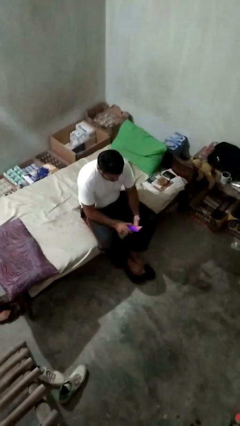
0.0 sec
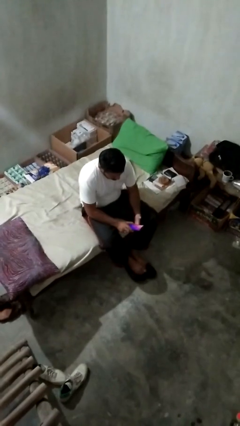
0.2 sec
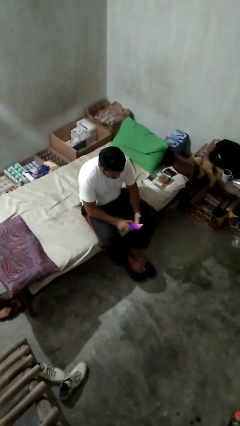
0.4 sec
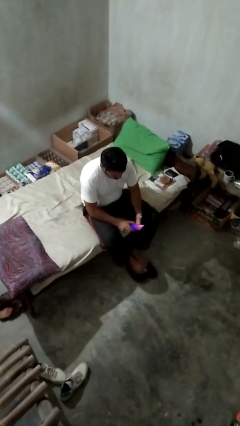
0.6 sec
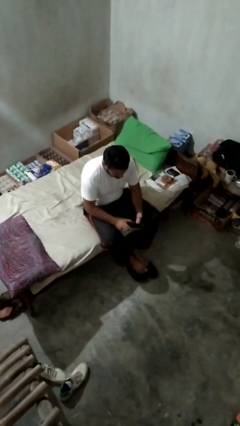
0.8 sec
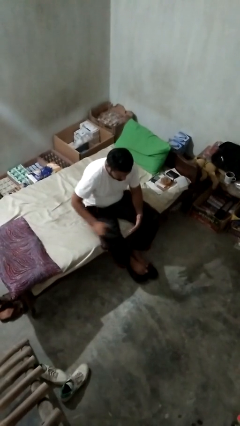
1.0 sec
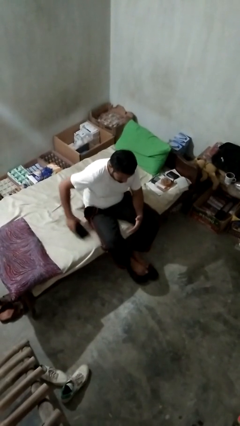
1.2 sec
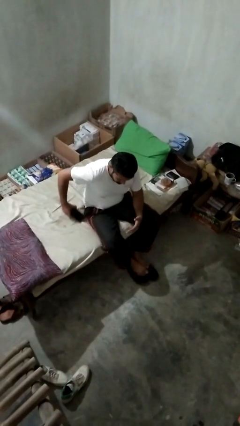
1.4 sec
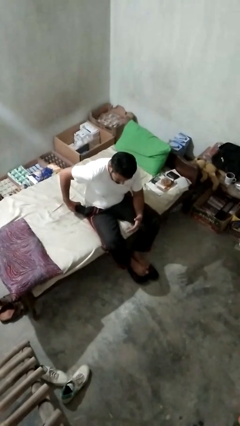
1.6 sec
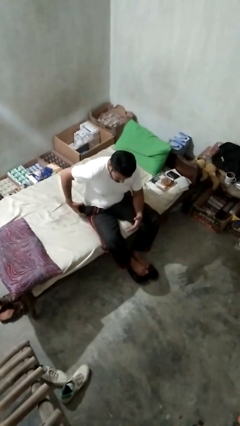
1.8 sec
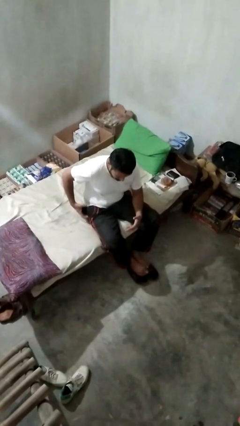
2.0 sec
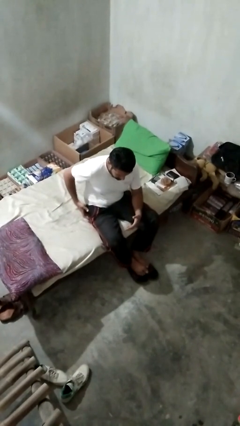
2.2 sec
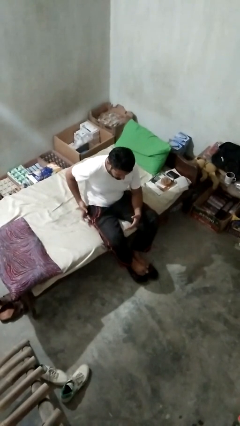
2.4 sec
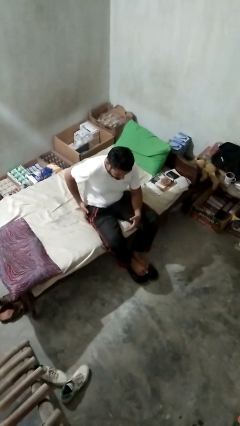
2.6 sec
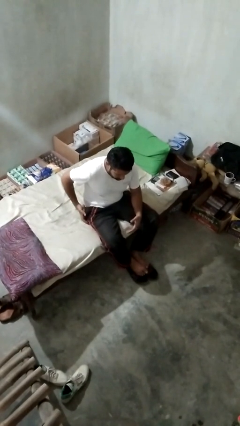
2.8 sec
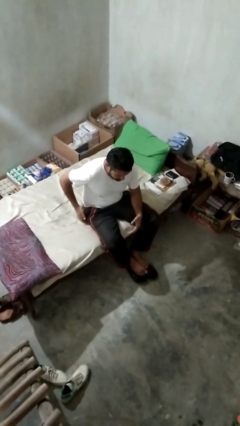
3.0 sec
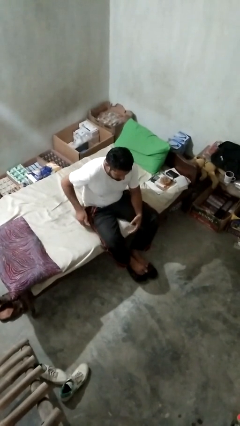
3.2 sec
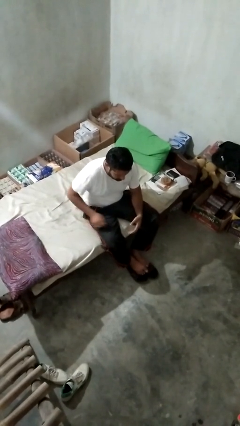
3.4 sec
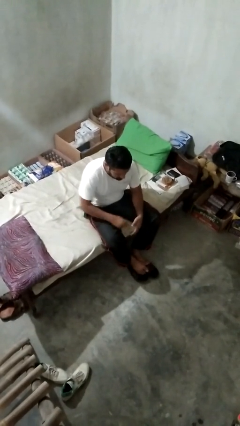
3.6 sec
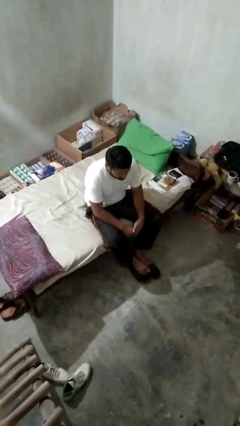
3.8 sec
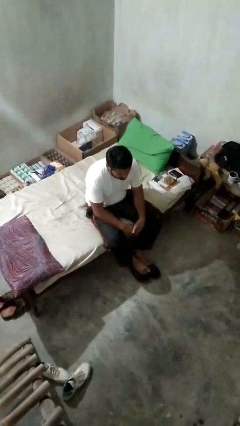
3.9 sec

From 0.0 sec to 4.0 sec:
person puts phone into pocket

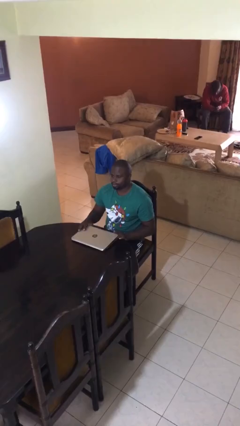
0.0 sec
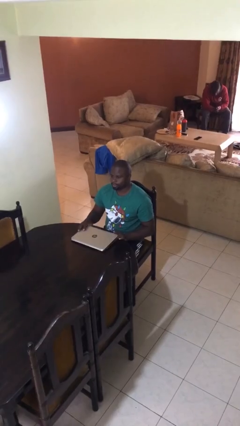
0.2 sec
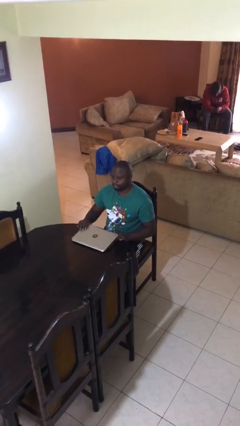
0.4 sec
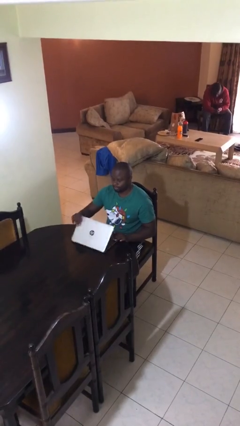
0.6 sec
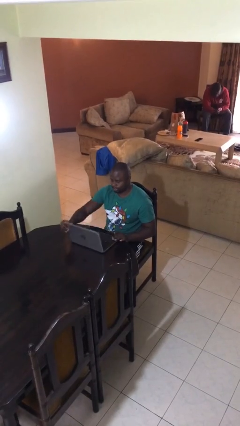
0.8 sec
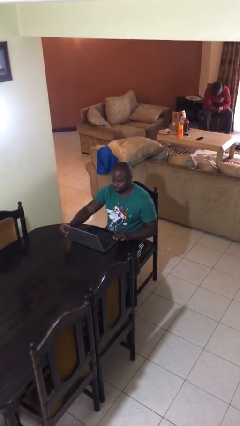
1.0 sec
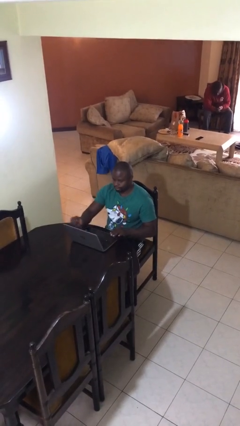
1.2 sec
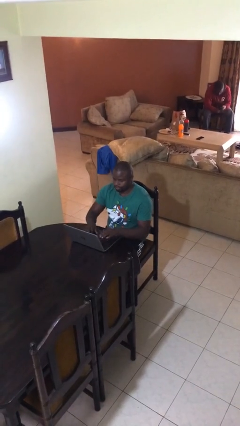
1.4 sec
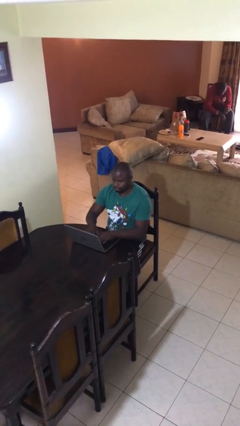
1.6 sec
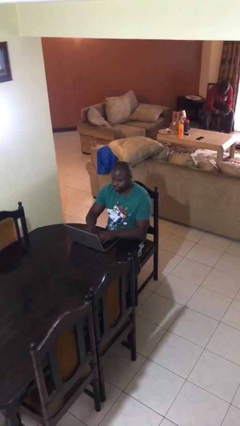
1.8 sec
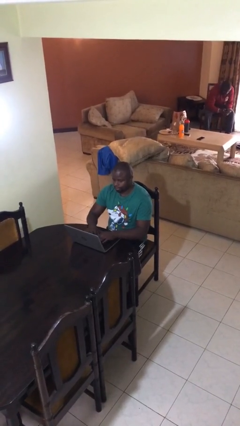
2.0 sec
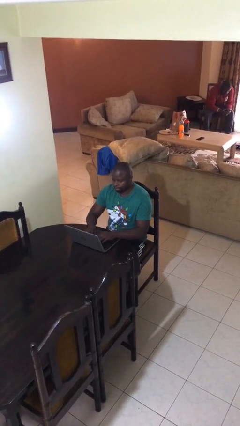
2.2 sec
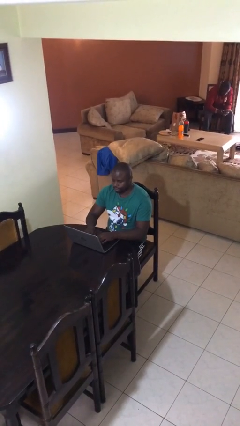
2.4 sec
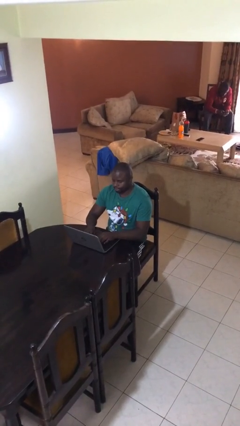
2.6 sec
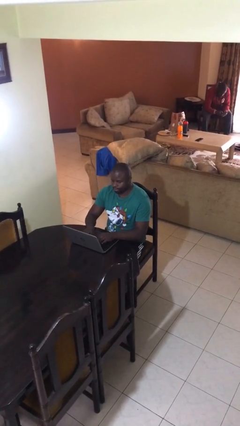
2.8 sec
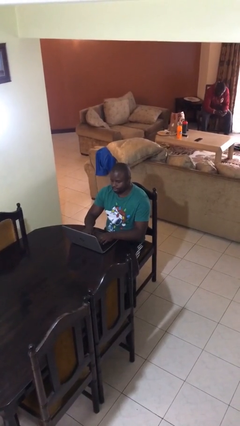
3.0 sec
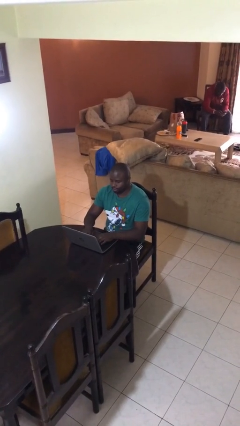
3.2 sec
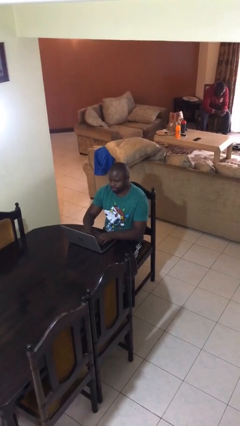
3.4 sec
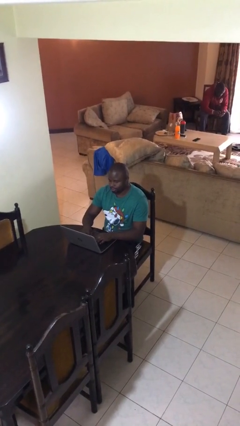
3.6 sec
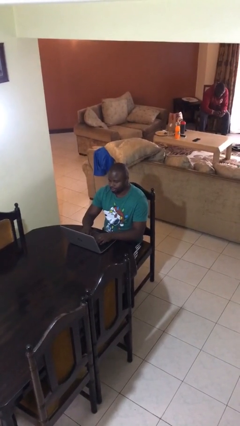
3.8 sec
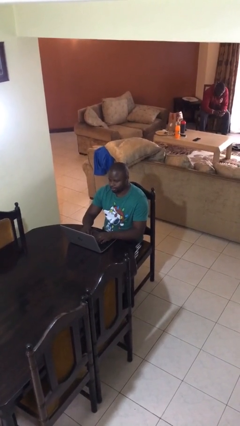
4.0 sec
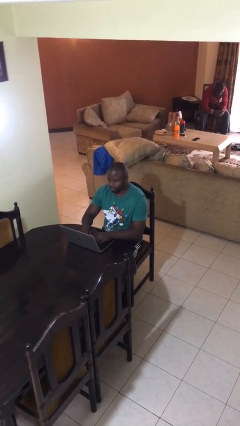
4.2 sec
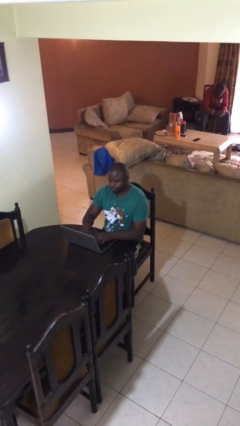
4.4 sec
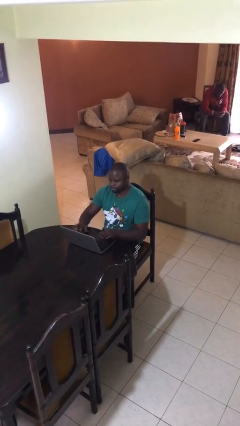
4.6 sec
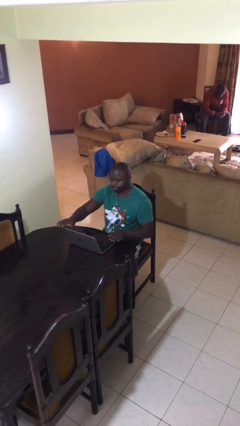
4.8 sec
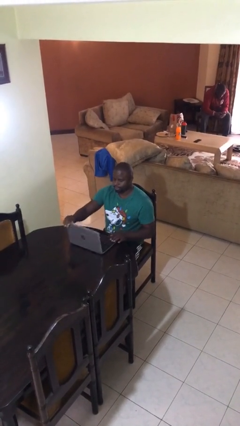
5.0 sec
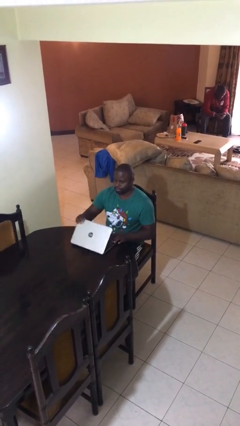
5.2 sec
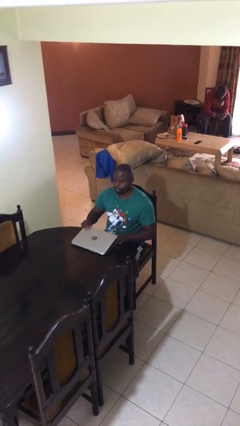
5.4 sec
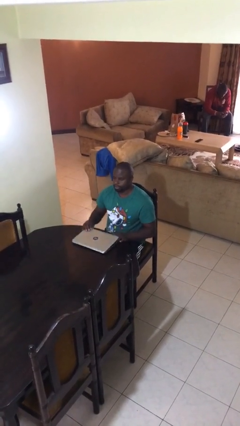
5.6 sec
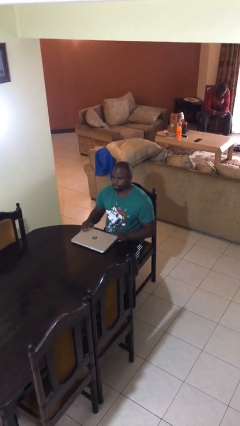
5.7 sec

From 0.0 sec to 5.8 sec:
person interacts with laptop

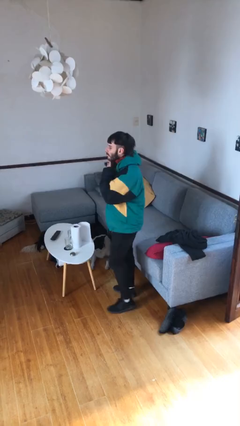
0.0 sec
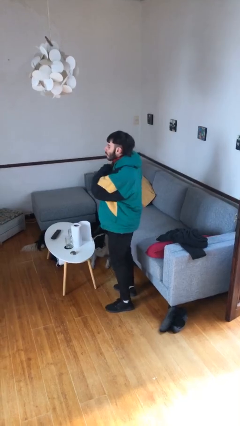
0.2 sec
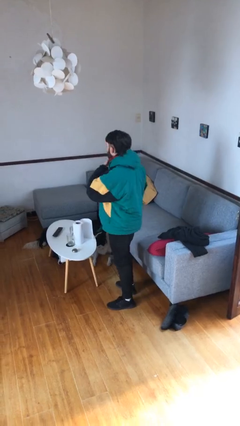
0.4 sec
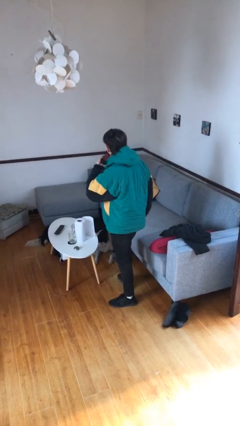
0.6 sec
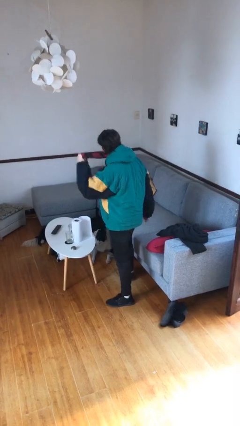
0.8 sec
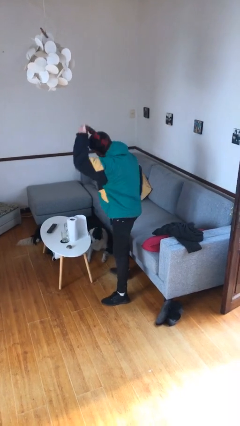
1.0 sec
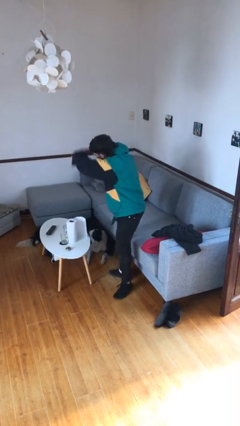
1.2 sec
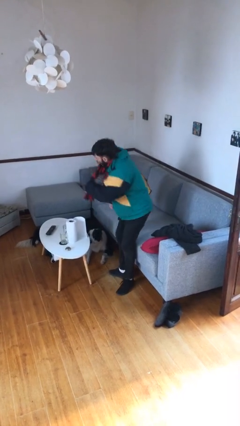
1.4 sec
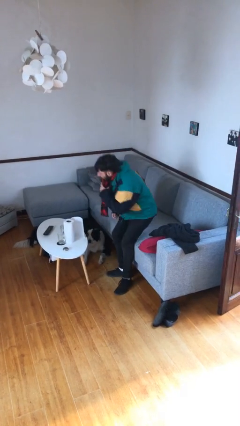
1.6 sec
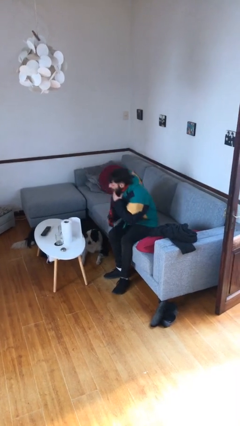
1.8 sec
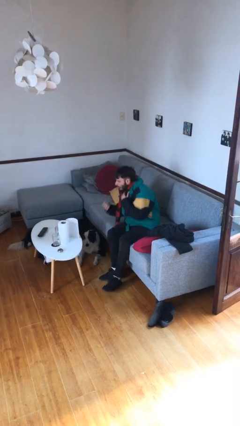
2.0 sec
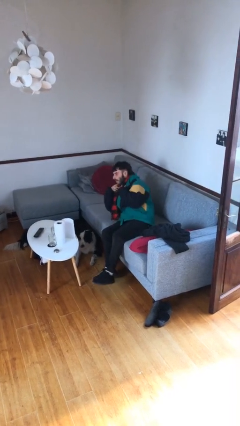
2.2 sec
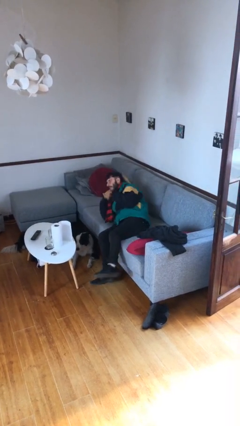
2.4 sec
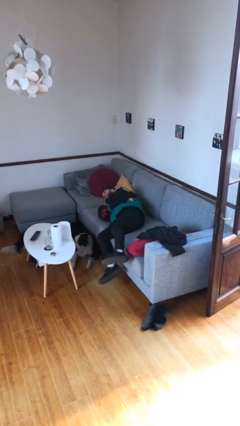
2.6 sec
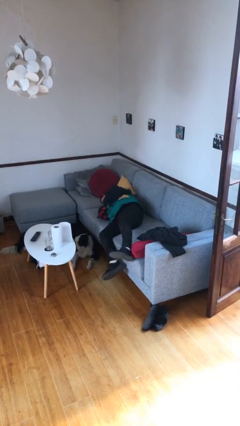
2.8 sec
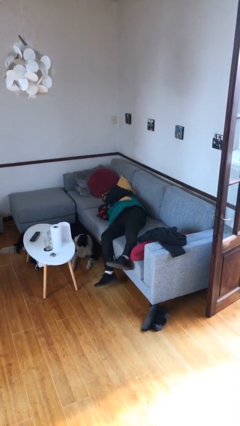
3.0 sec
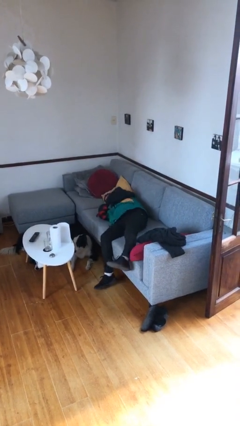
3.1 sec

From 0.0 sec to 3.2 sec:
person lies down on couch

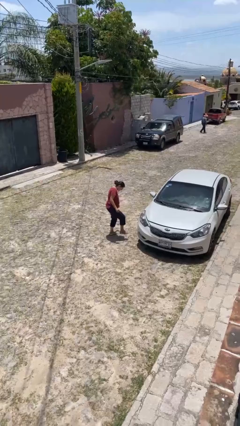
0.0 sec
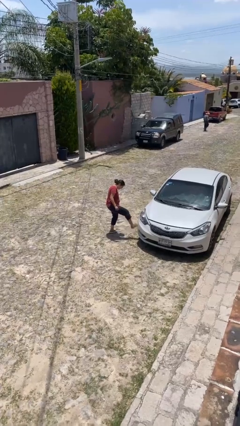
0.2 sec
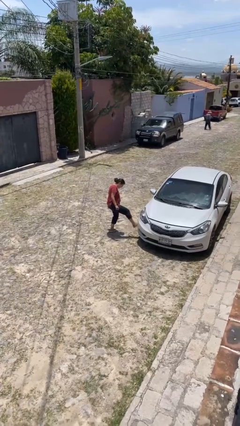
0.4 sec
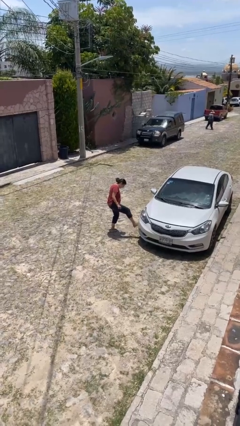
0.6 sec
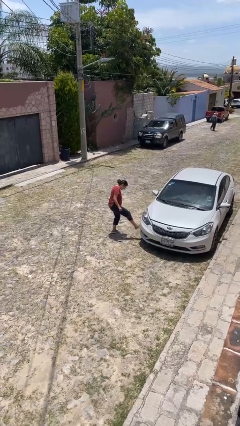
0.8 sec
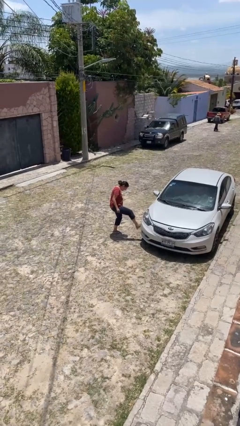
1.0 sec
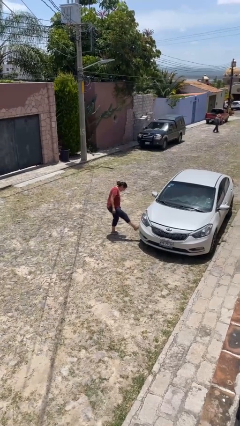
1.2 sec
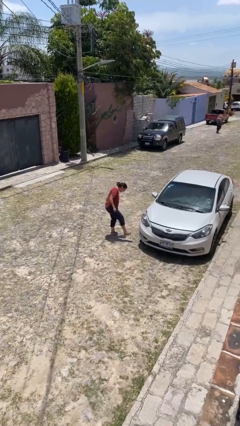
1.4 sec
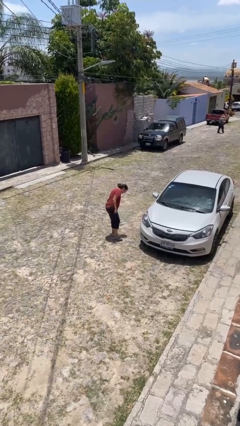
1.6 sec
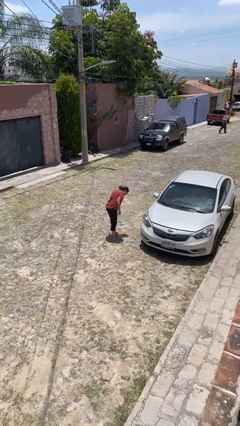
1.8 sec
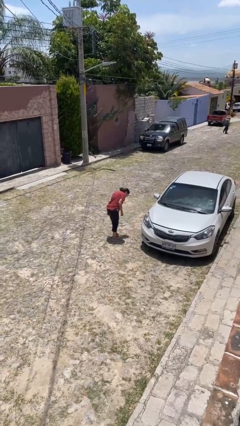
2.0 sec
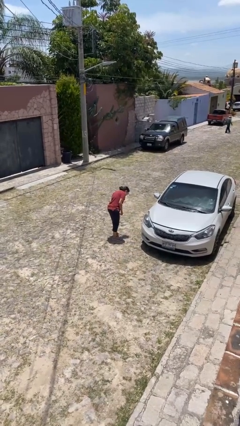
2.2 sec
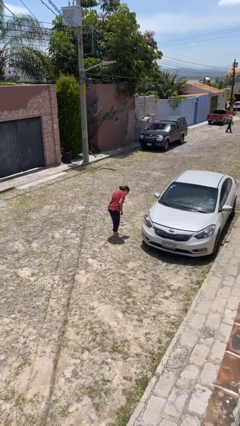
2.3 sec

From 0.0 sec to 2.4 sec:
person kicks car tires

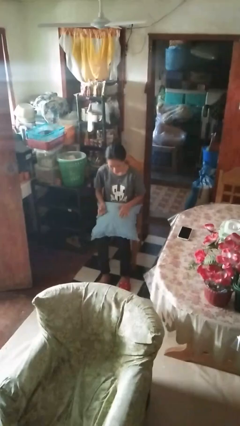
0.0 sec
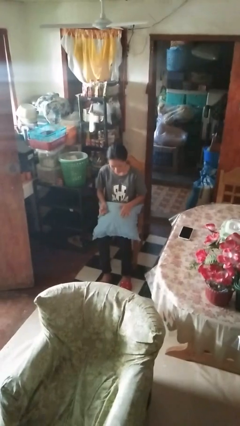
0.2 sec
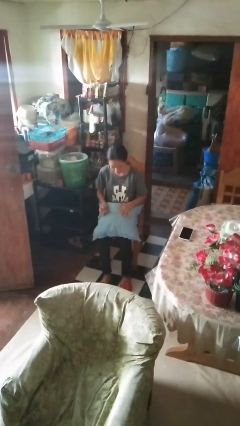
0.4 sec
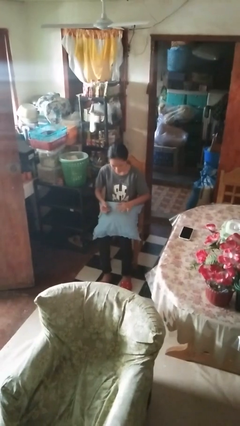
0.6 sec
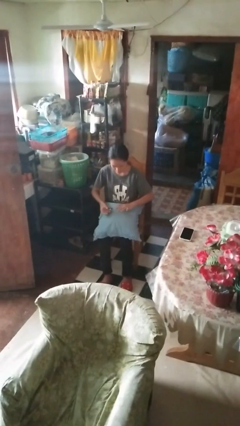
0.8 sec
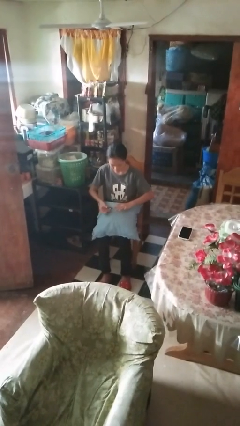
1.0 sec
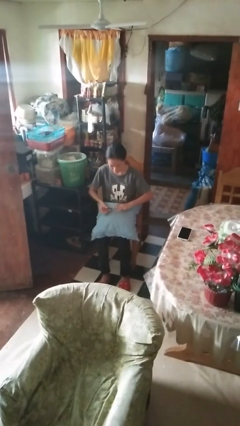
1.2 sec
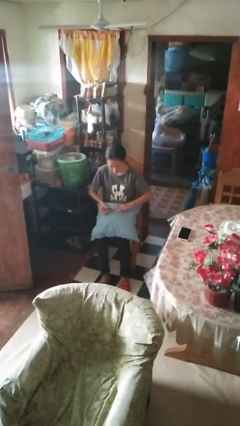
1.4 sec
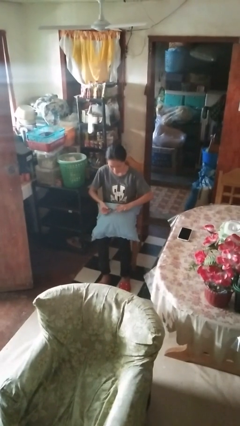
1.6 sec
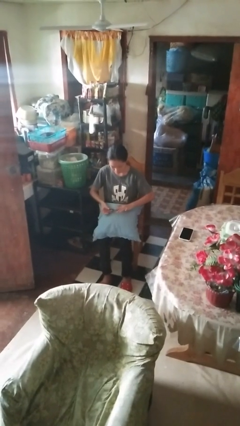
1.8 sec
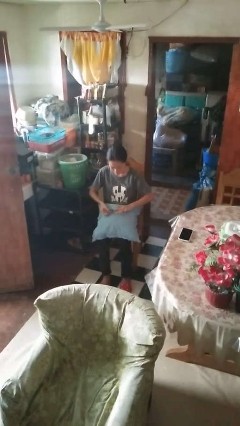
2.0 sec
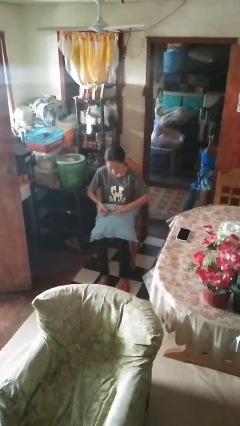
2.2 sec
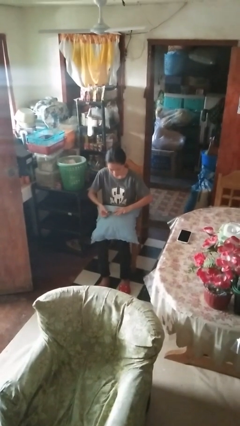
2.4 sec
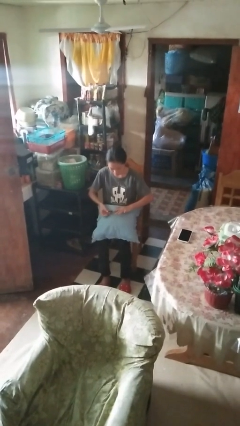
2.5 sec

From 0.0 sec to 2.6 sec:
person clips fingernails
